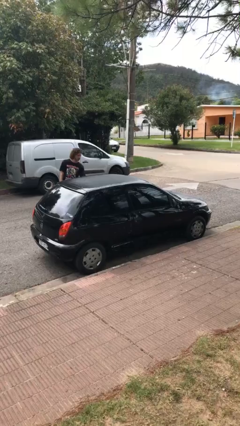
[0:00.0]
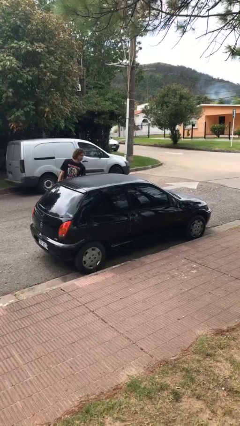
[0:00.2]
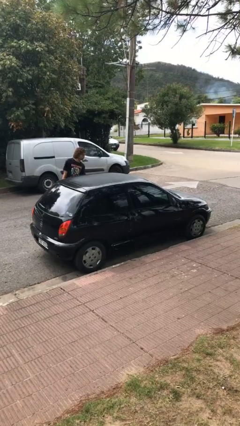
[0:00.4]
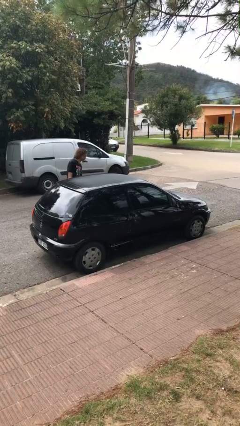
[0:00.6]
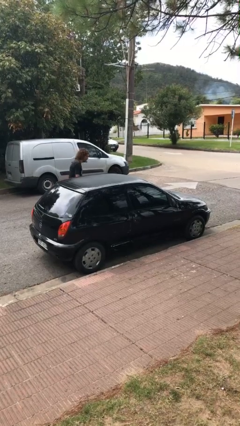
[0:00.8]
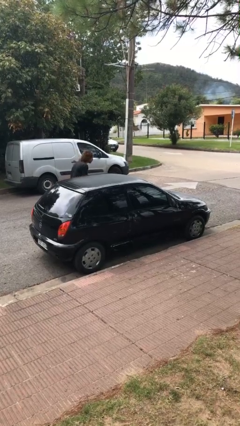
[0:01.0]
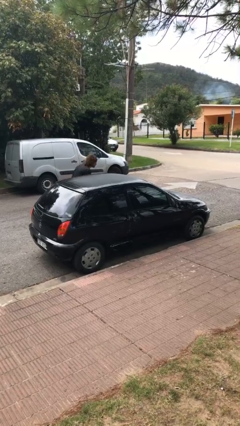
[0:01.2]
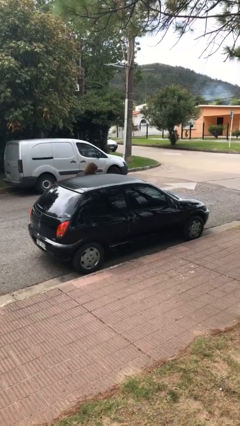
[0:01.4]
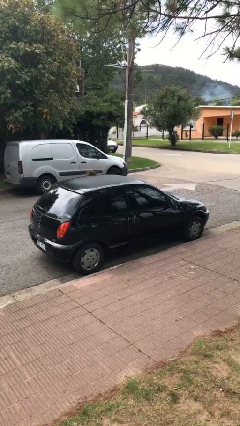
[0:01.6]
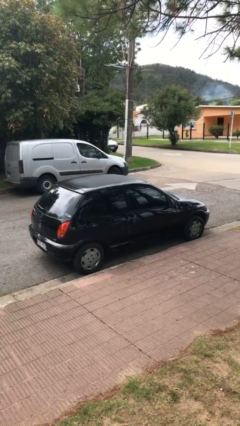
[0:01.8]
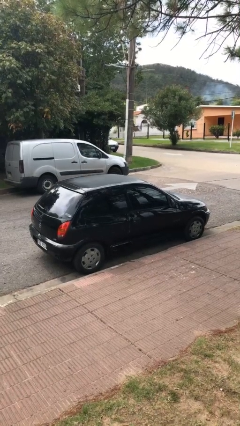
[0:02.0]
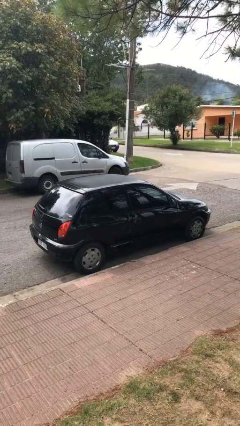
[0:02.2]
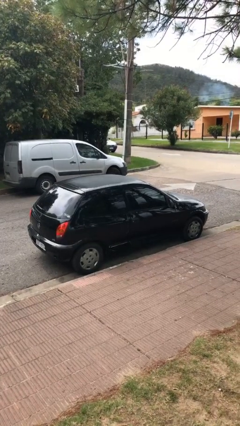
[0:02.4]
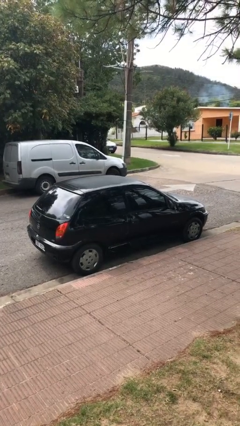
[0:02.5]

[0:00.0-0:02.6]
car picks up person

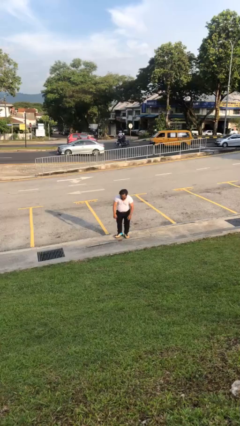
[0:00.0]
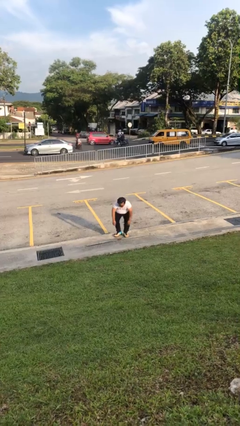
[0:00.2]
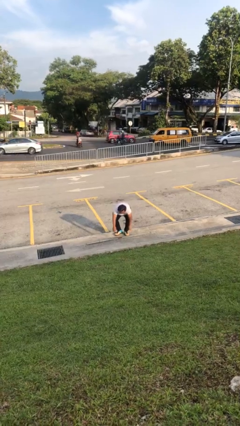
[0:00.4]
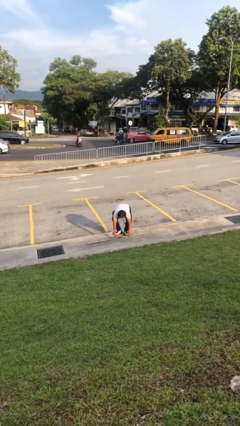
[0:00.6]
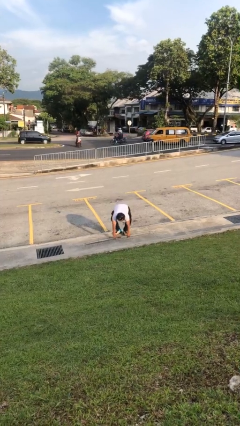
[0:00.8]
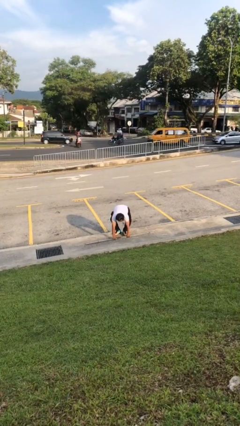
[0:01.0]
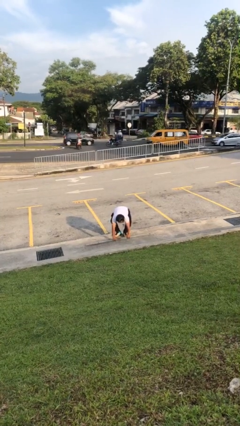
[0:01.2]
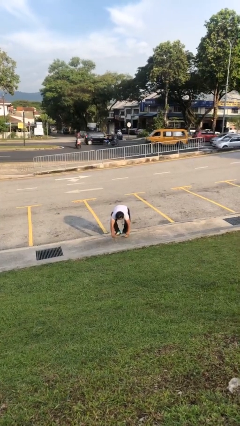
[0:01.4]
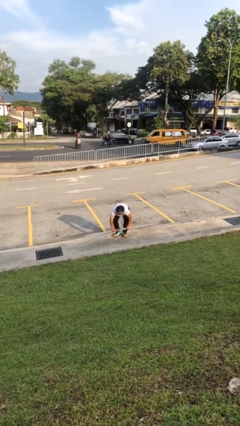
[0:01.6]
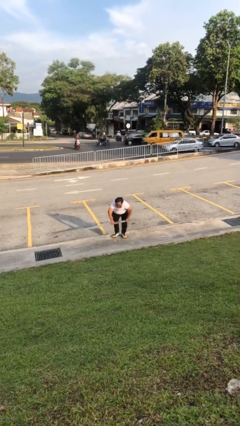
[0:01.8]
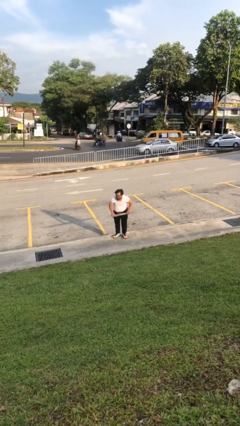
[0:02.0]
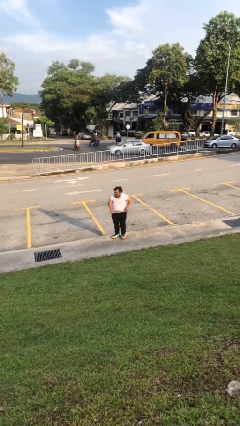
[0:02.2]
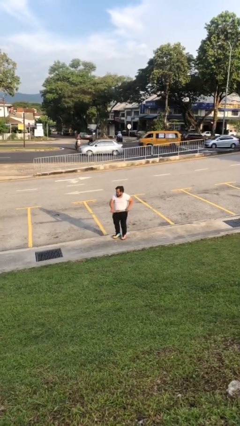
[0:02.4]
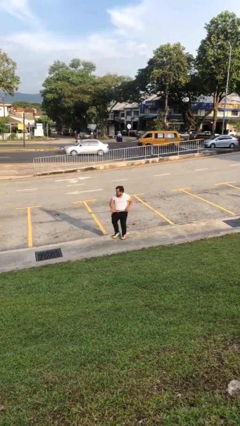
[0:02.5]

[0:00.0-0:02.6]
person picks up object from floor

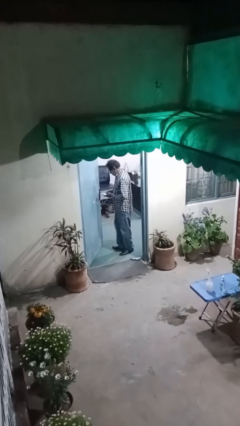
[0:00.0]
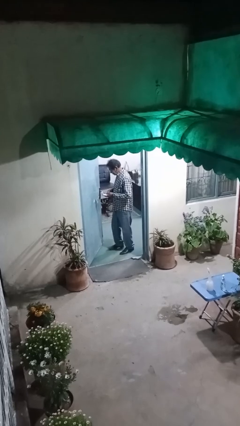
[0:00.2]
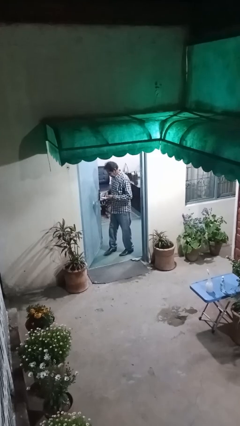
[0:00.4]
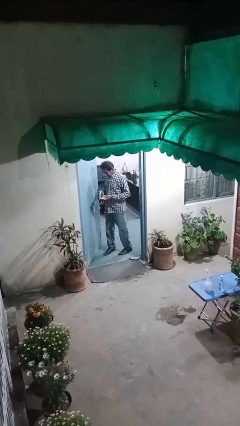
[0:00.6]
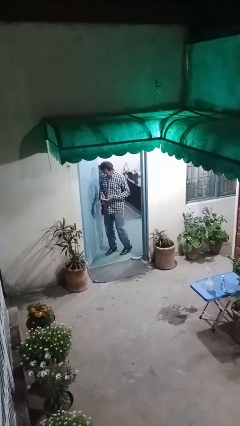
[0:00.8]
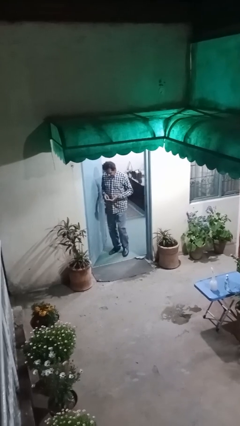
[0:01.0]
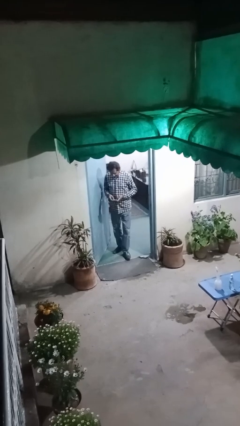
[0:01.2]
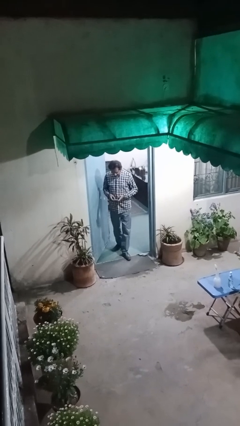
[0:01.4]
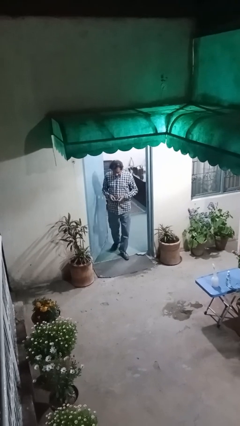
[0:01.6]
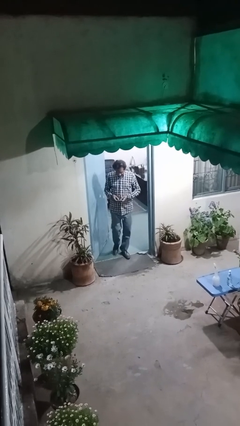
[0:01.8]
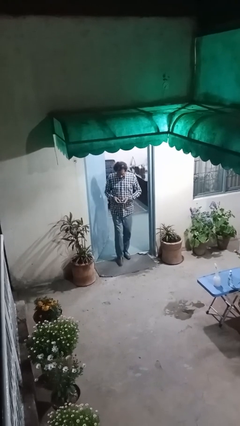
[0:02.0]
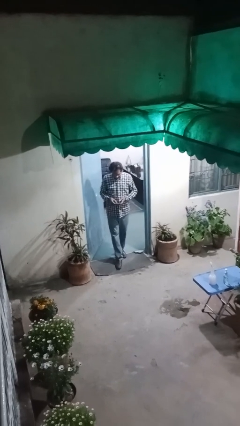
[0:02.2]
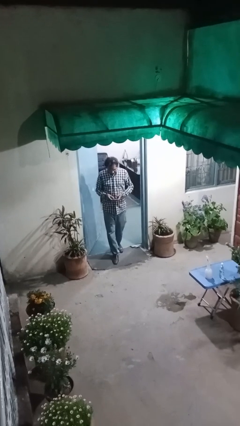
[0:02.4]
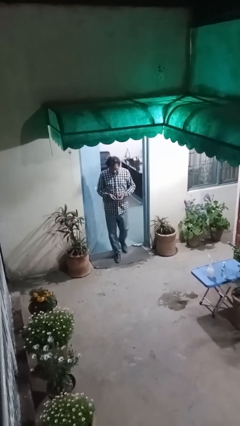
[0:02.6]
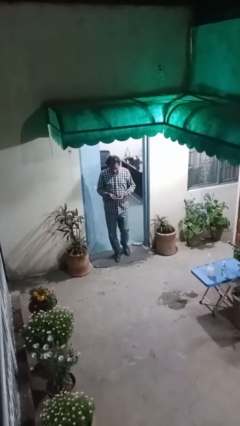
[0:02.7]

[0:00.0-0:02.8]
person enters scene through structure

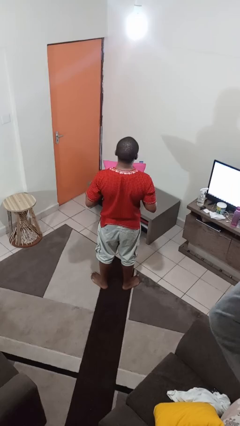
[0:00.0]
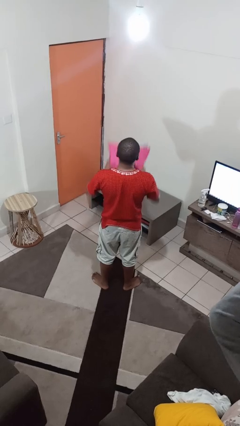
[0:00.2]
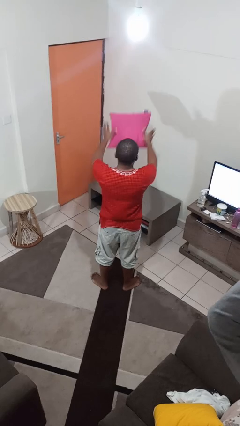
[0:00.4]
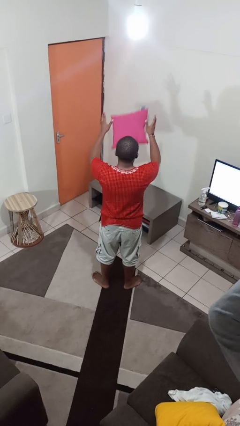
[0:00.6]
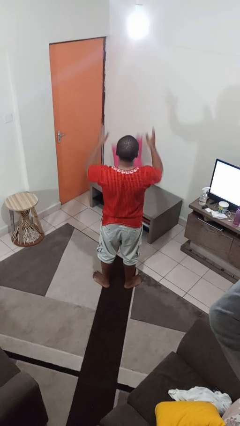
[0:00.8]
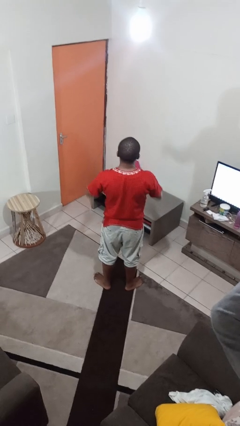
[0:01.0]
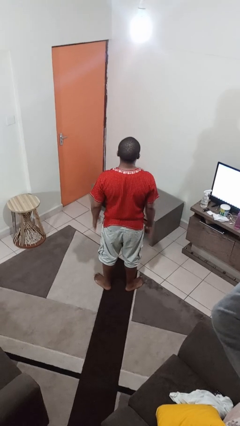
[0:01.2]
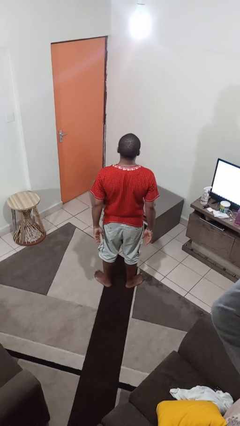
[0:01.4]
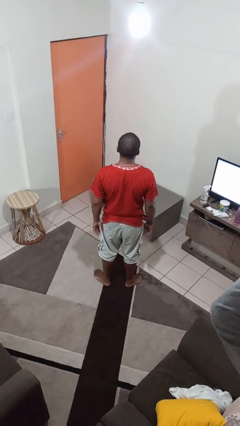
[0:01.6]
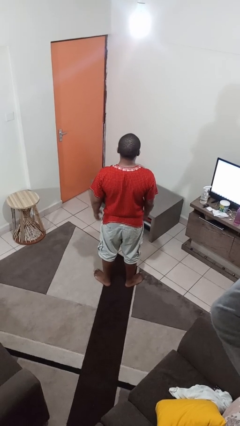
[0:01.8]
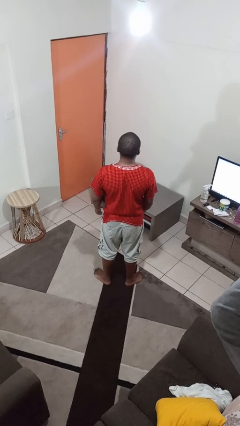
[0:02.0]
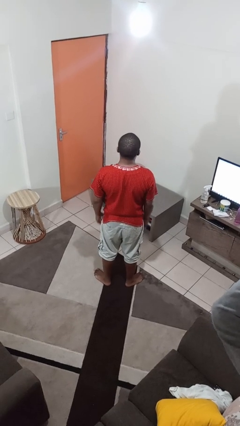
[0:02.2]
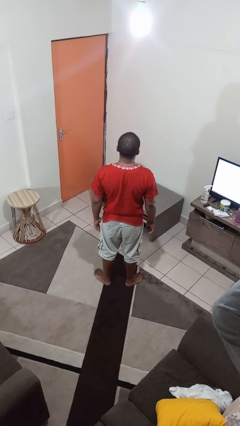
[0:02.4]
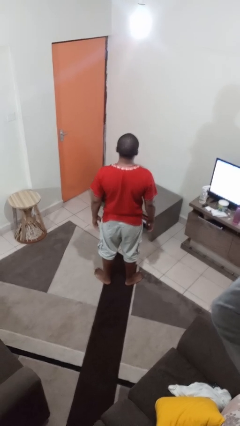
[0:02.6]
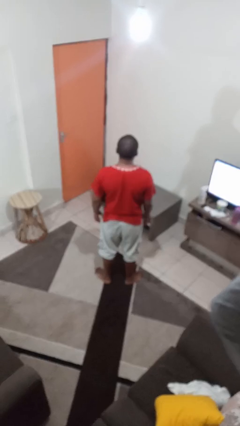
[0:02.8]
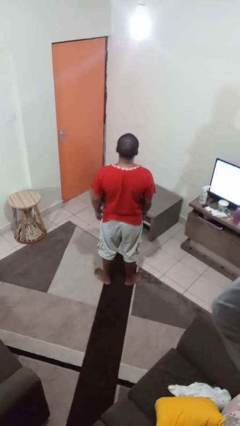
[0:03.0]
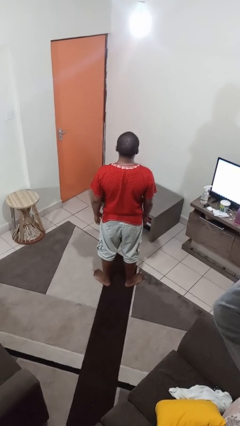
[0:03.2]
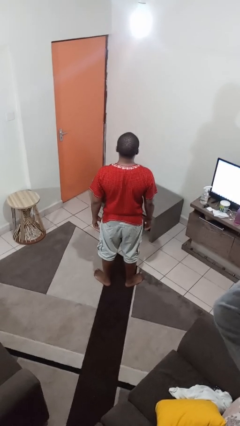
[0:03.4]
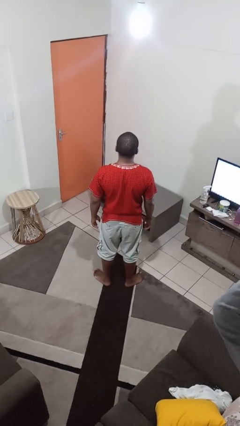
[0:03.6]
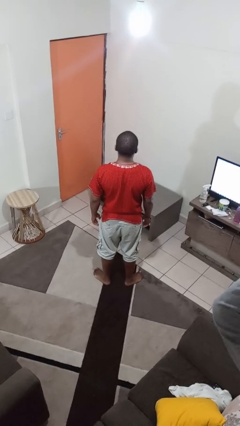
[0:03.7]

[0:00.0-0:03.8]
person throws object on table

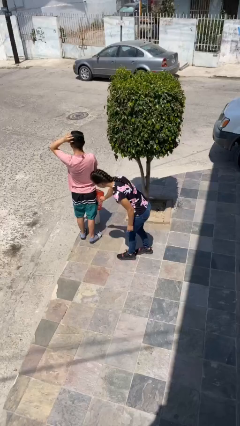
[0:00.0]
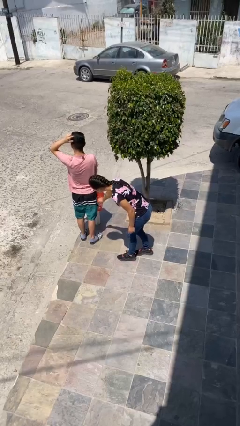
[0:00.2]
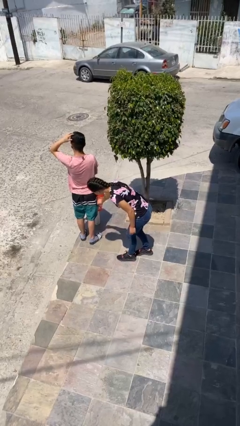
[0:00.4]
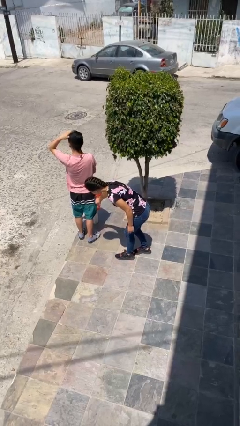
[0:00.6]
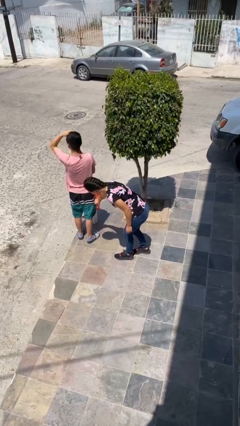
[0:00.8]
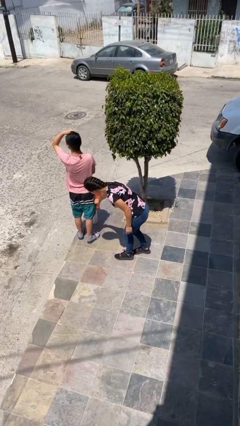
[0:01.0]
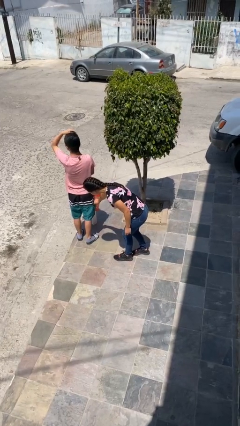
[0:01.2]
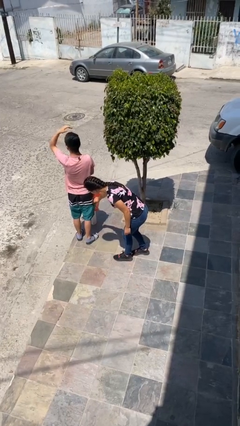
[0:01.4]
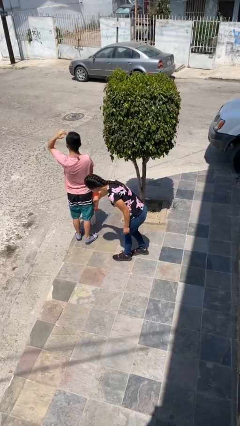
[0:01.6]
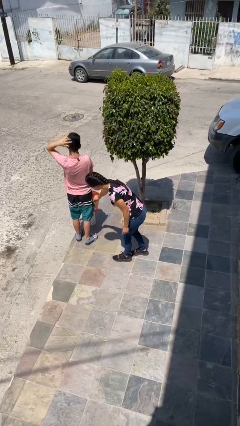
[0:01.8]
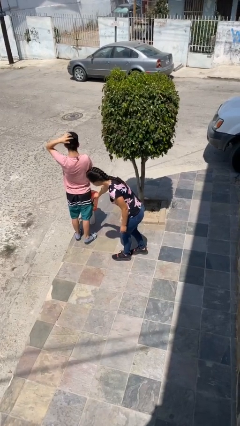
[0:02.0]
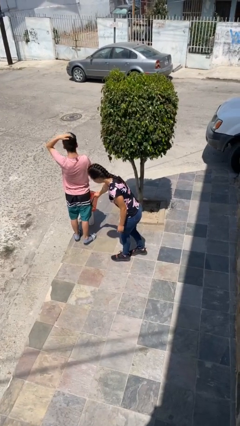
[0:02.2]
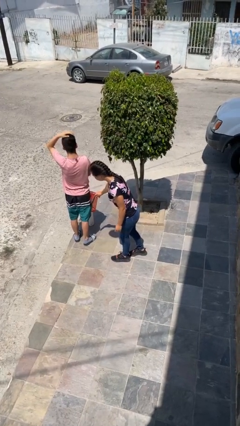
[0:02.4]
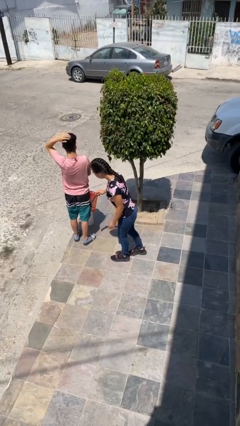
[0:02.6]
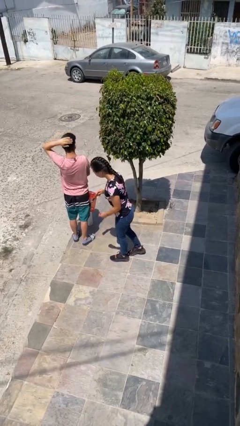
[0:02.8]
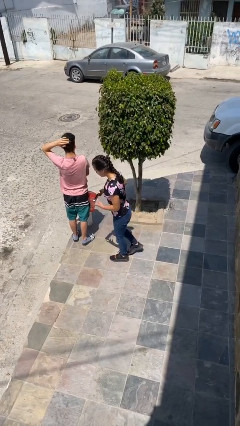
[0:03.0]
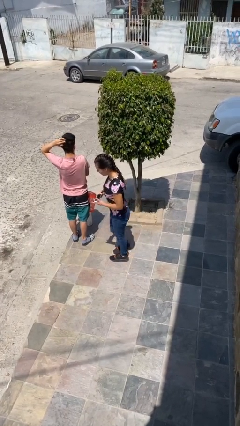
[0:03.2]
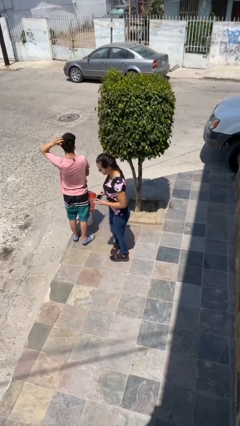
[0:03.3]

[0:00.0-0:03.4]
person steals object from person

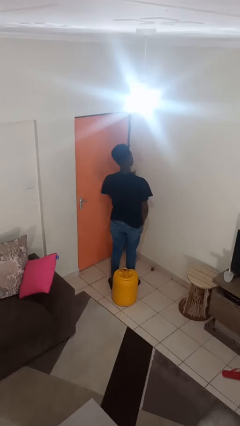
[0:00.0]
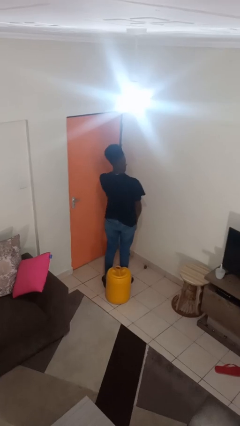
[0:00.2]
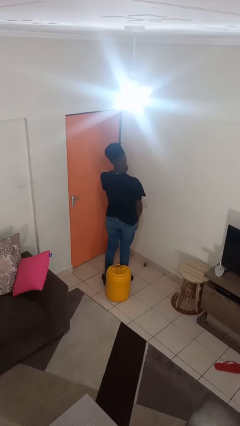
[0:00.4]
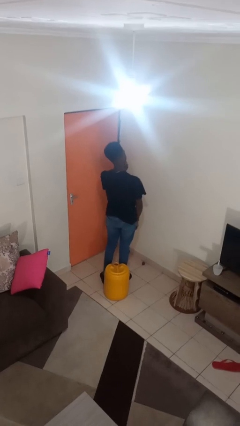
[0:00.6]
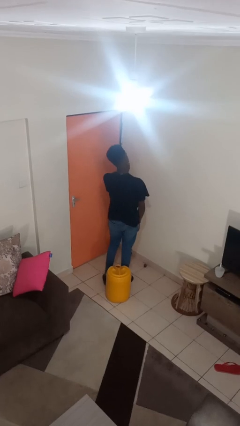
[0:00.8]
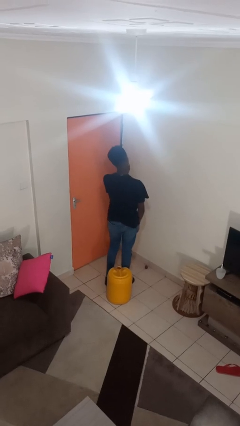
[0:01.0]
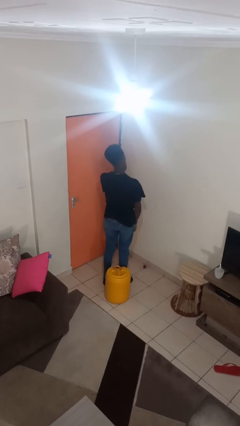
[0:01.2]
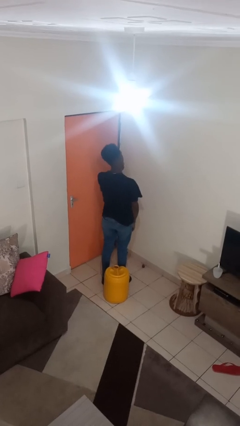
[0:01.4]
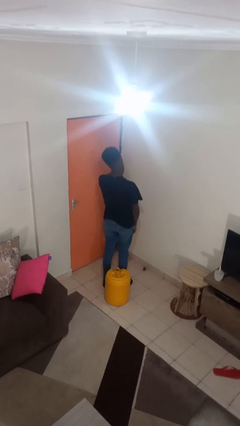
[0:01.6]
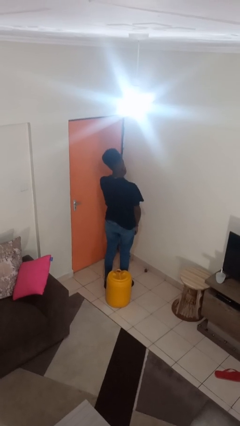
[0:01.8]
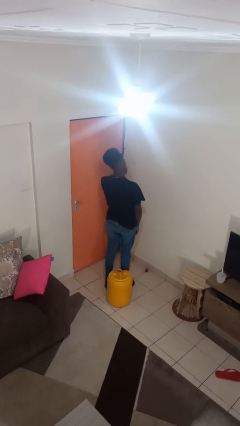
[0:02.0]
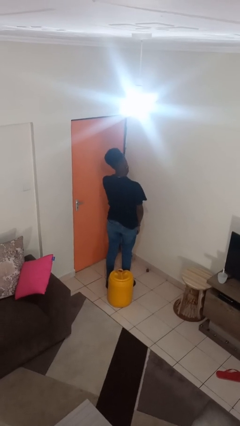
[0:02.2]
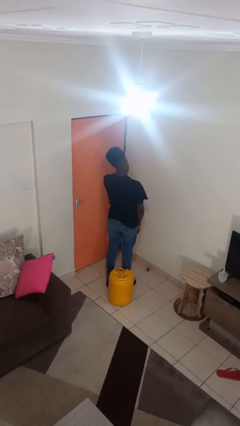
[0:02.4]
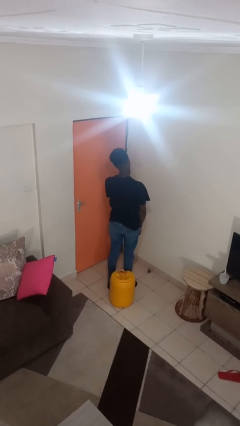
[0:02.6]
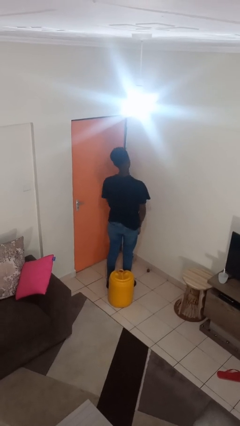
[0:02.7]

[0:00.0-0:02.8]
person strokes chin
